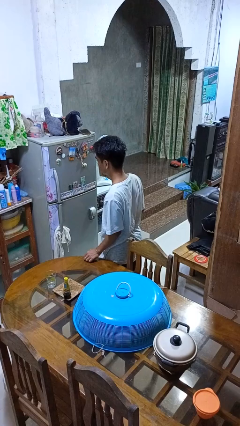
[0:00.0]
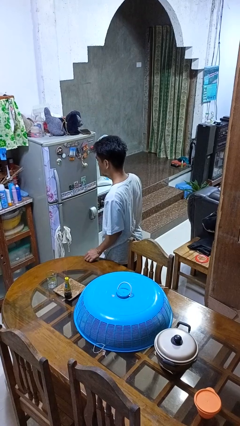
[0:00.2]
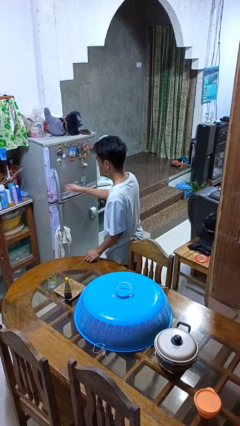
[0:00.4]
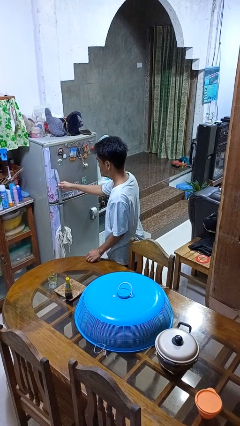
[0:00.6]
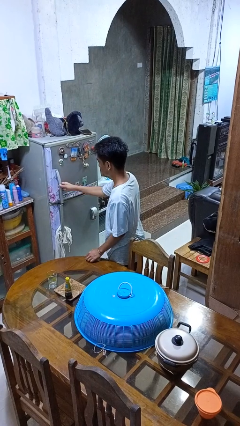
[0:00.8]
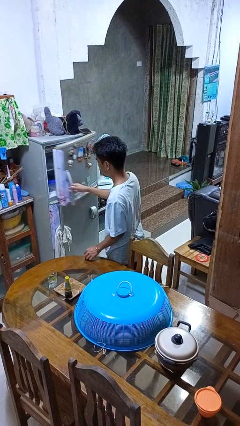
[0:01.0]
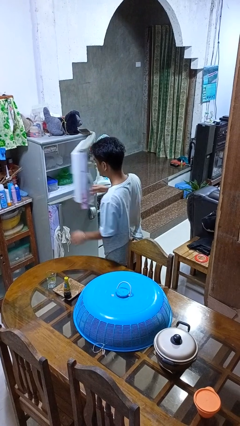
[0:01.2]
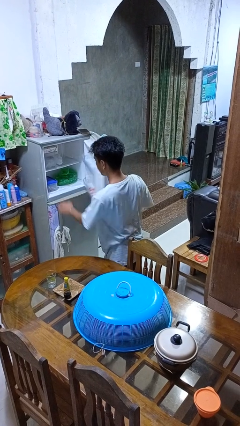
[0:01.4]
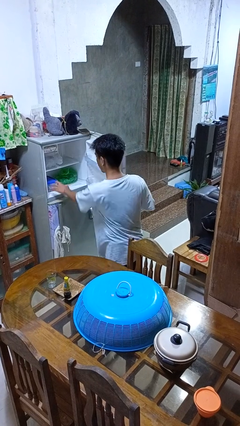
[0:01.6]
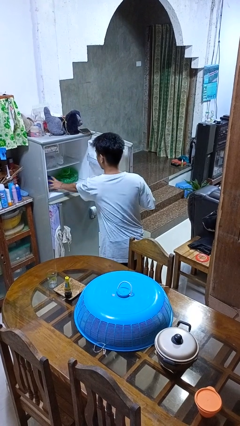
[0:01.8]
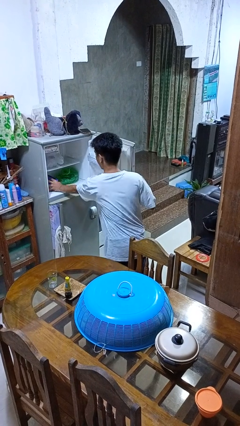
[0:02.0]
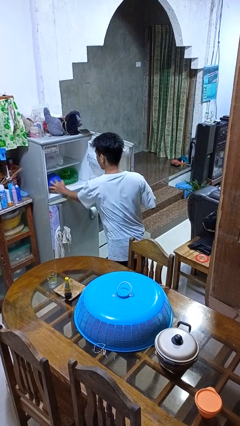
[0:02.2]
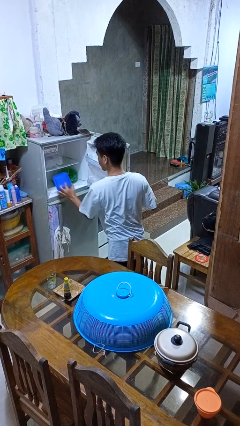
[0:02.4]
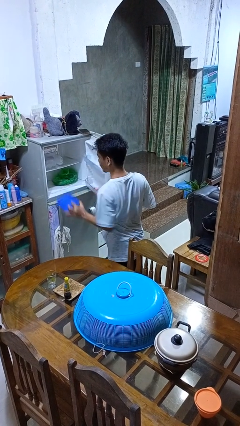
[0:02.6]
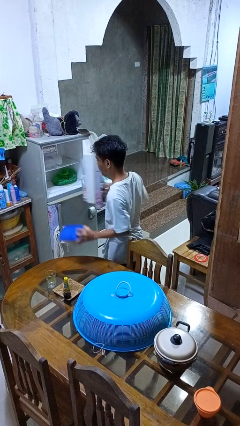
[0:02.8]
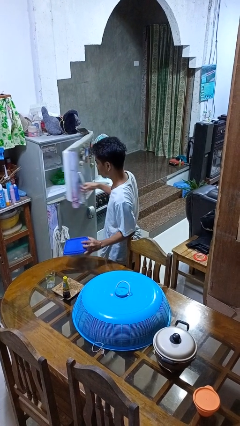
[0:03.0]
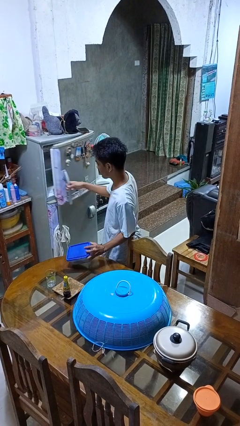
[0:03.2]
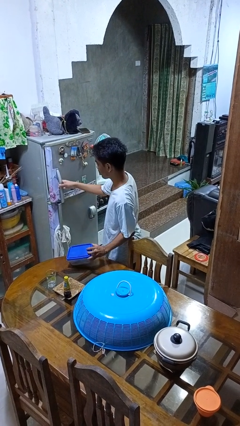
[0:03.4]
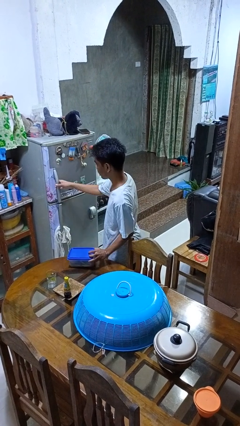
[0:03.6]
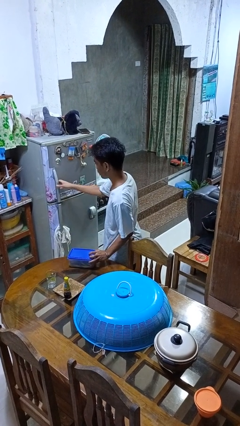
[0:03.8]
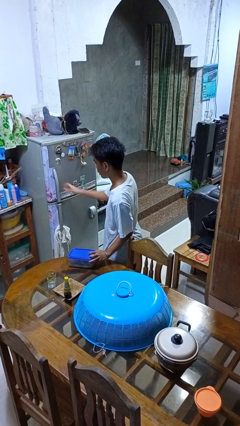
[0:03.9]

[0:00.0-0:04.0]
person takes object from refrigerator

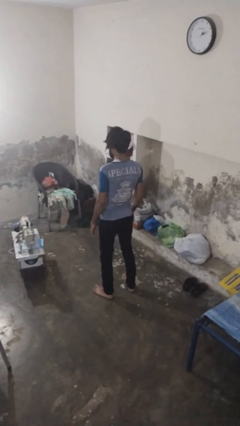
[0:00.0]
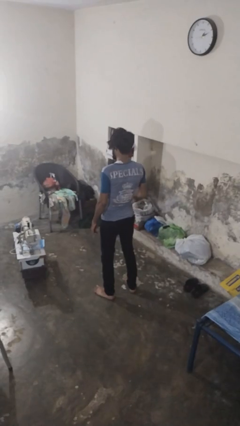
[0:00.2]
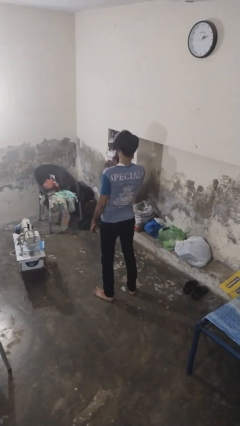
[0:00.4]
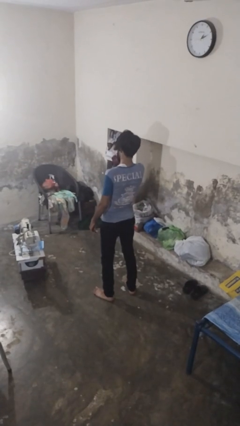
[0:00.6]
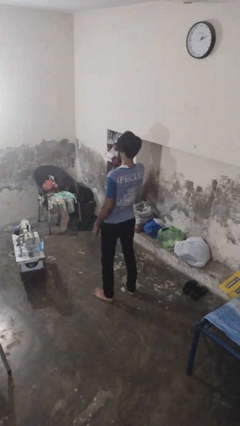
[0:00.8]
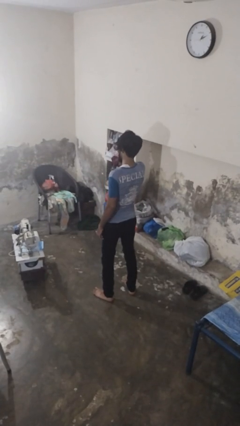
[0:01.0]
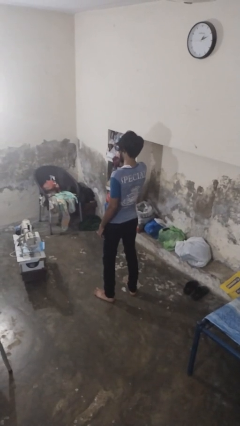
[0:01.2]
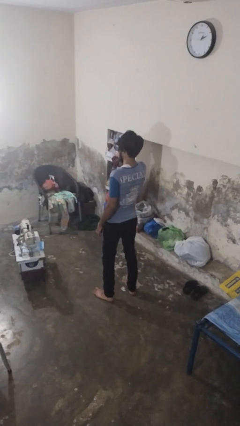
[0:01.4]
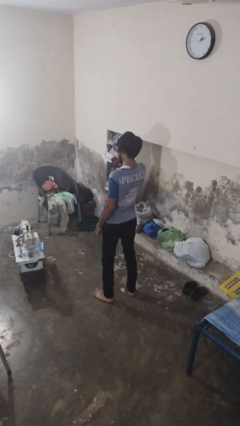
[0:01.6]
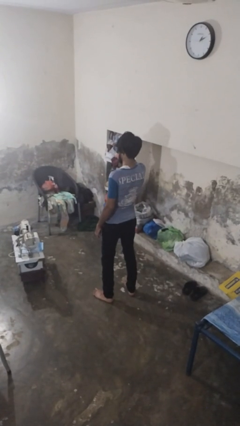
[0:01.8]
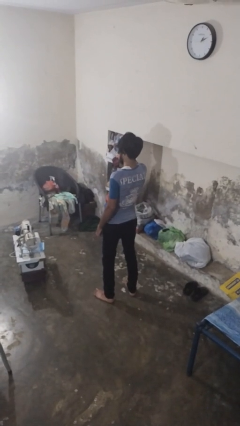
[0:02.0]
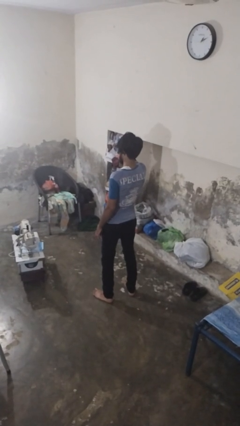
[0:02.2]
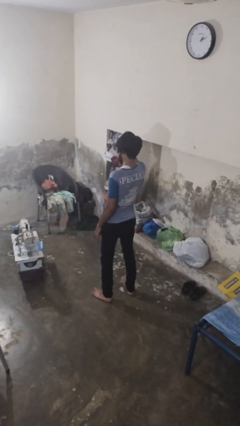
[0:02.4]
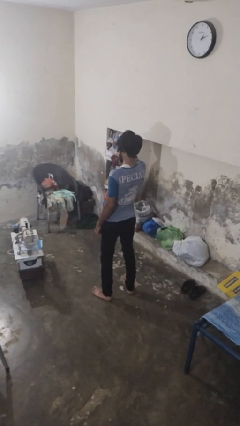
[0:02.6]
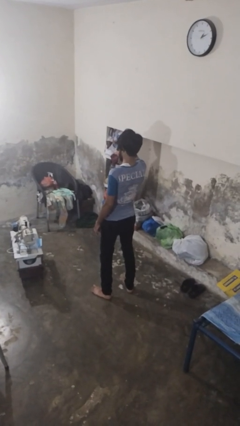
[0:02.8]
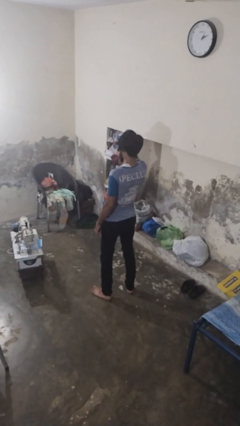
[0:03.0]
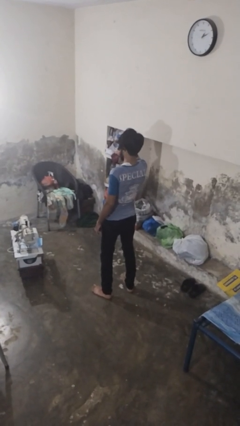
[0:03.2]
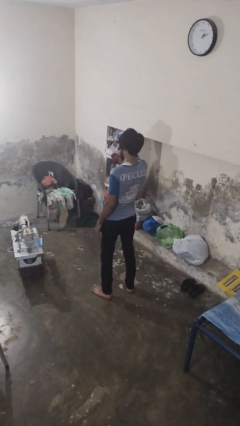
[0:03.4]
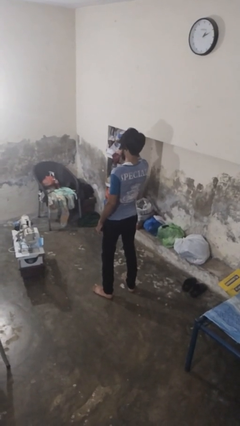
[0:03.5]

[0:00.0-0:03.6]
person shades eyes

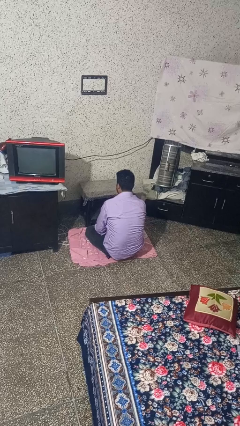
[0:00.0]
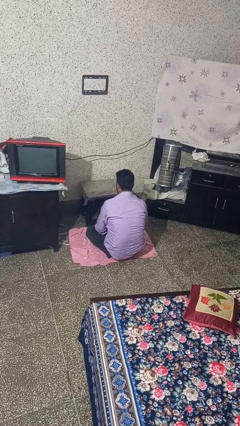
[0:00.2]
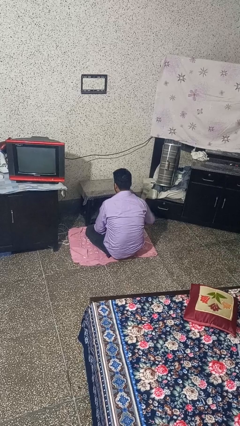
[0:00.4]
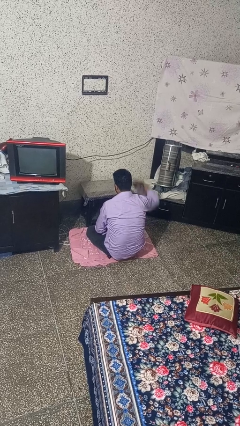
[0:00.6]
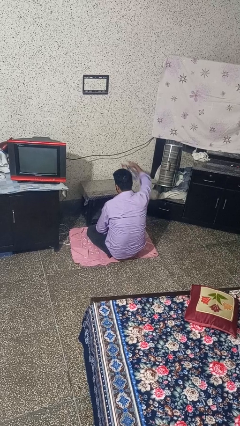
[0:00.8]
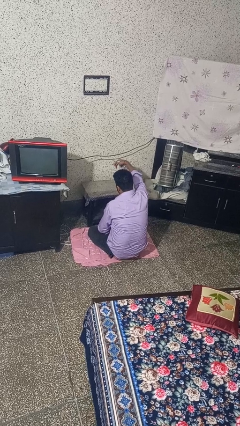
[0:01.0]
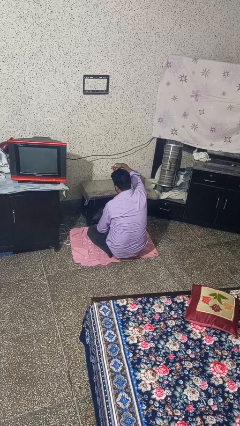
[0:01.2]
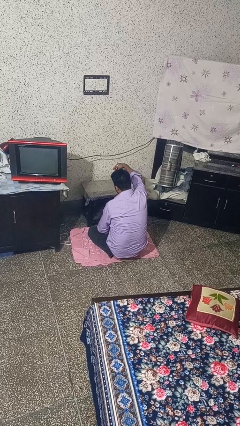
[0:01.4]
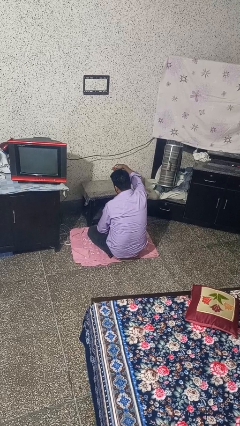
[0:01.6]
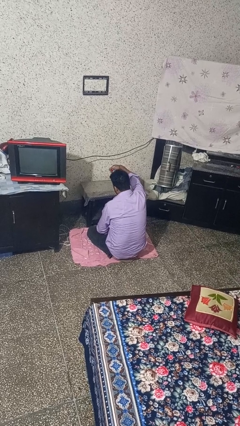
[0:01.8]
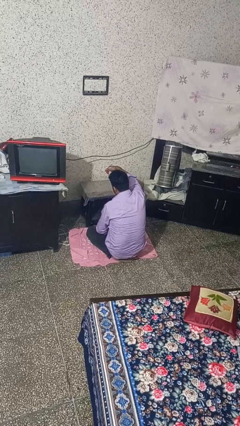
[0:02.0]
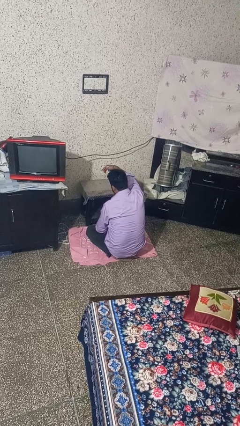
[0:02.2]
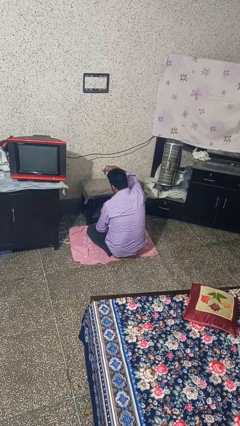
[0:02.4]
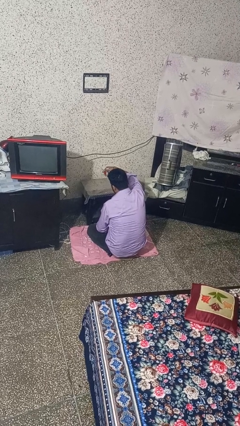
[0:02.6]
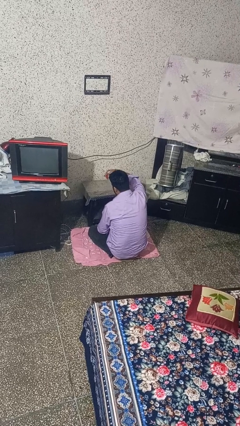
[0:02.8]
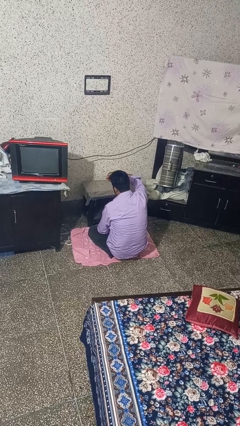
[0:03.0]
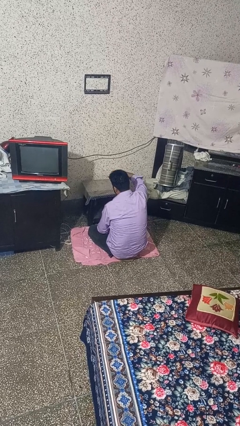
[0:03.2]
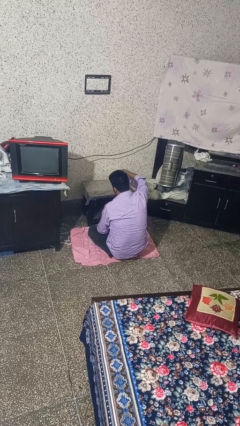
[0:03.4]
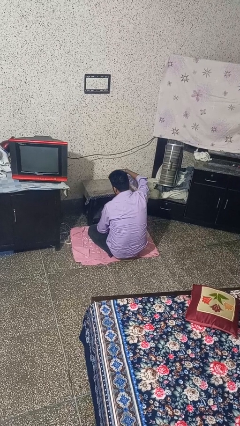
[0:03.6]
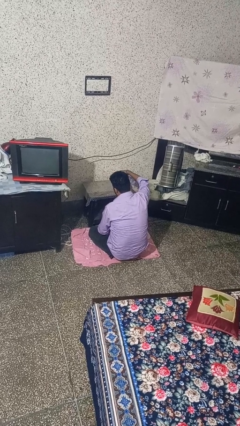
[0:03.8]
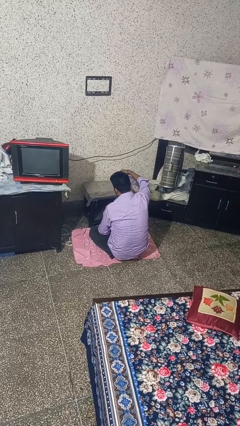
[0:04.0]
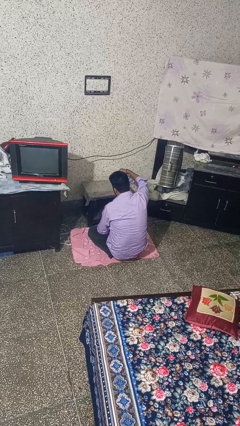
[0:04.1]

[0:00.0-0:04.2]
person sprays from bottle

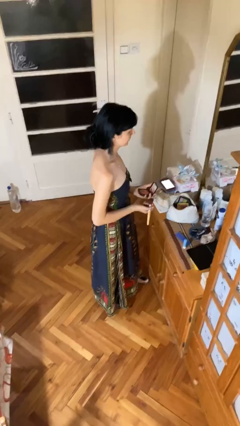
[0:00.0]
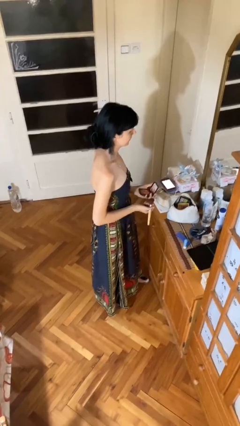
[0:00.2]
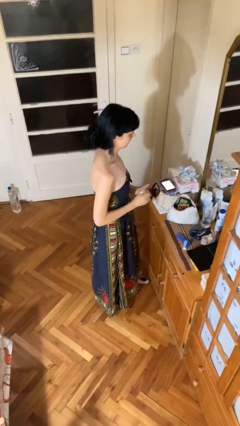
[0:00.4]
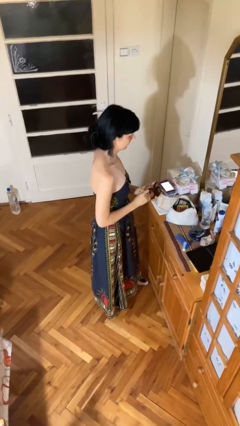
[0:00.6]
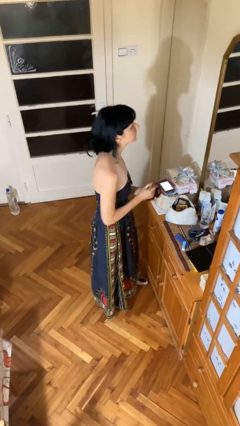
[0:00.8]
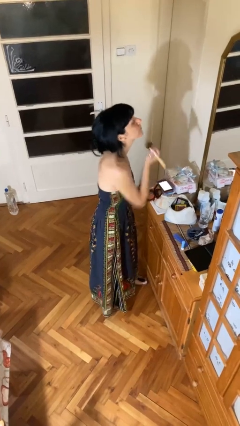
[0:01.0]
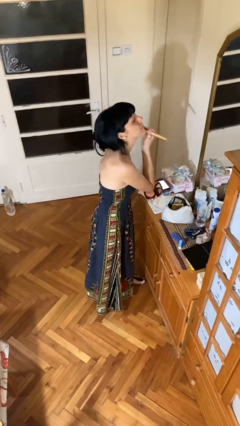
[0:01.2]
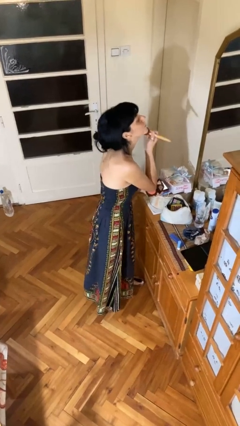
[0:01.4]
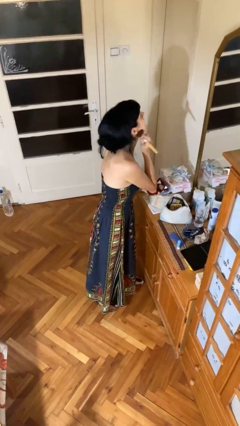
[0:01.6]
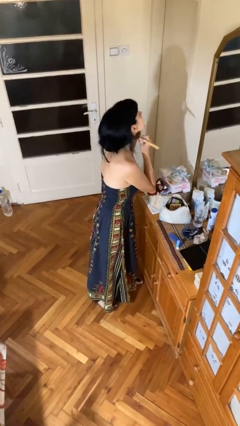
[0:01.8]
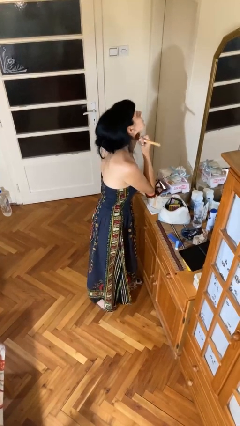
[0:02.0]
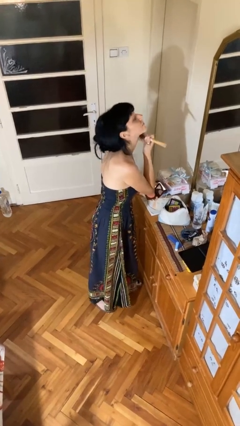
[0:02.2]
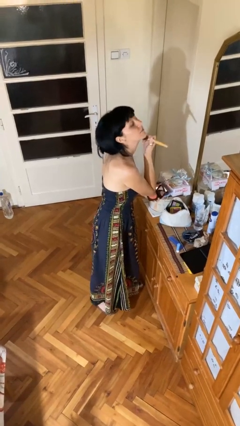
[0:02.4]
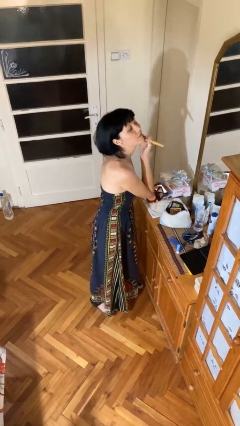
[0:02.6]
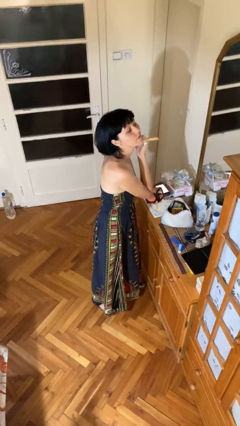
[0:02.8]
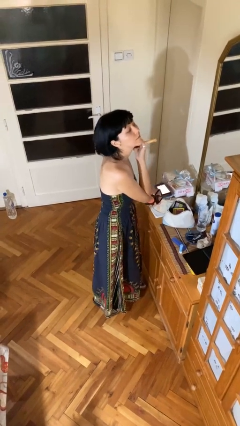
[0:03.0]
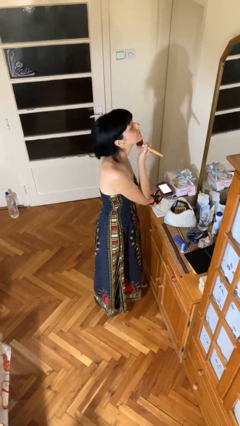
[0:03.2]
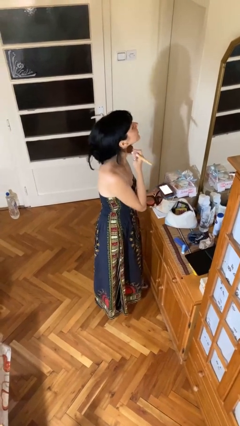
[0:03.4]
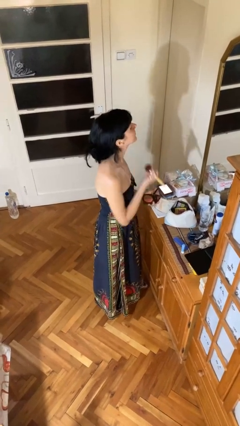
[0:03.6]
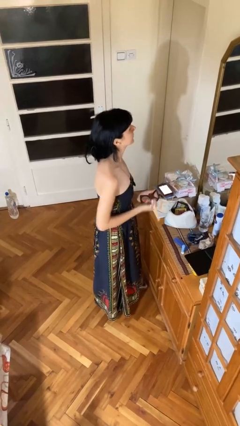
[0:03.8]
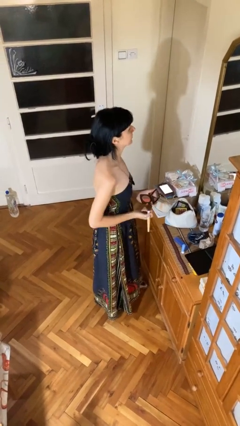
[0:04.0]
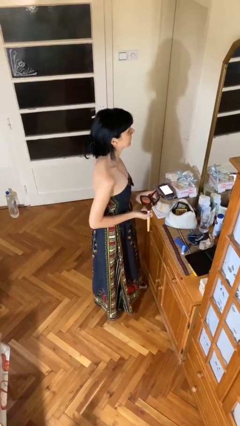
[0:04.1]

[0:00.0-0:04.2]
person applies foundation makeup

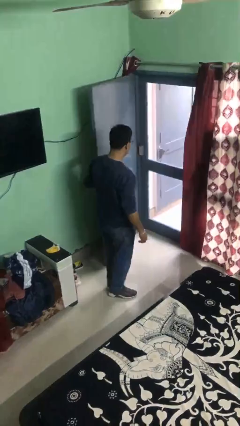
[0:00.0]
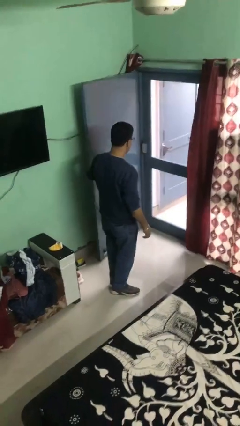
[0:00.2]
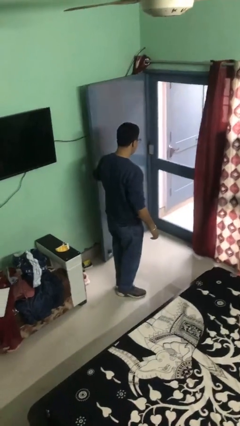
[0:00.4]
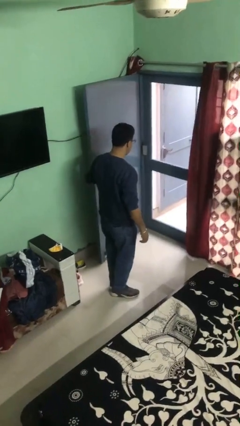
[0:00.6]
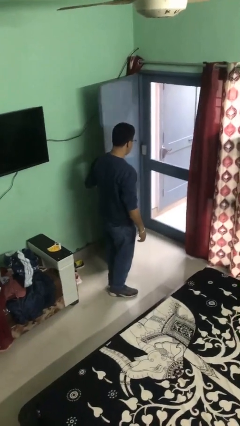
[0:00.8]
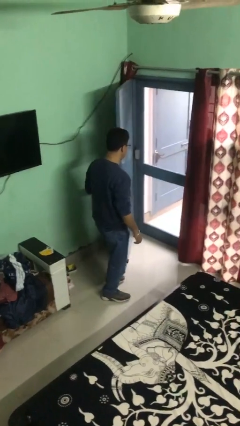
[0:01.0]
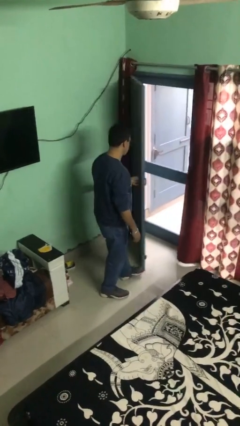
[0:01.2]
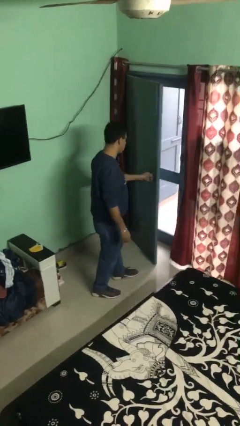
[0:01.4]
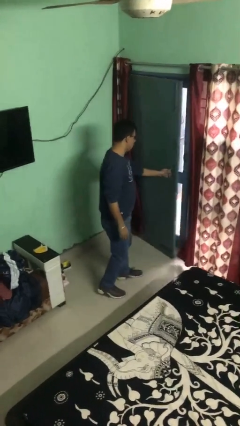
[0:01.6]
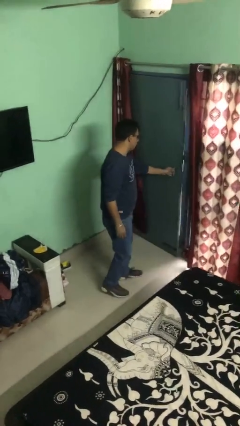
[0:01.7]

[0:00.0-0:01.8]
person closes facility door
